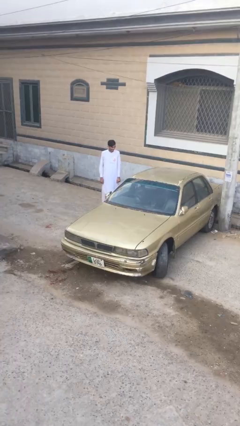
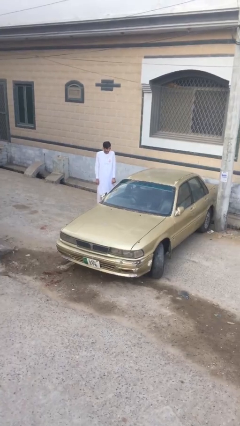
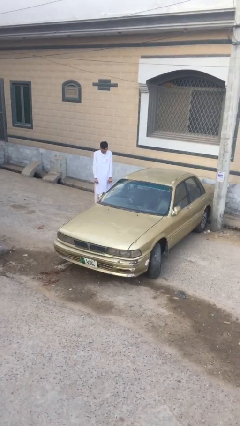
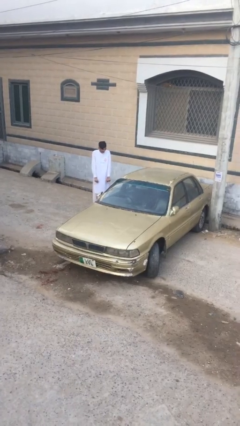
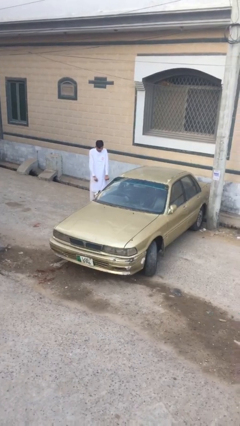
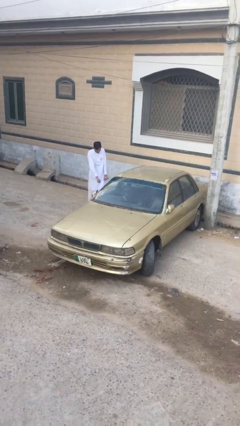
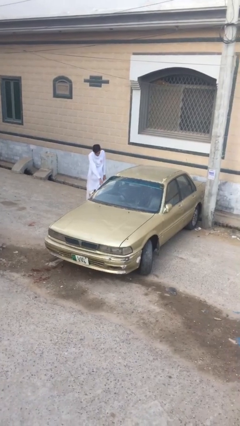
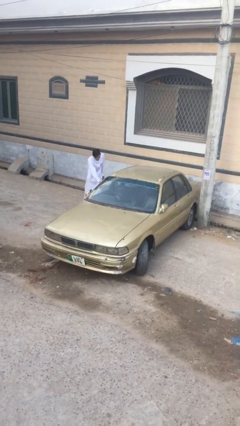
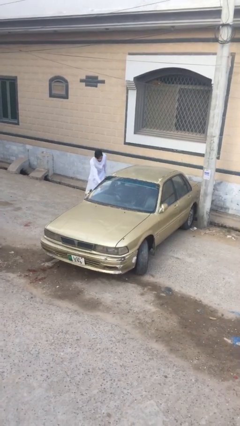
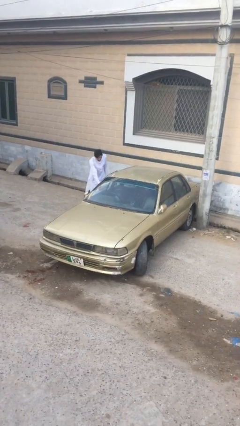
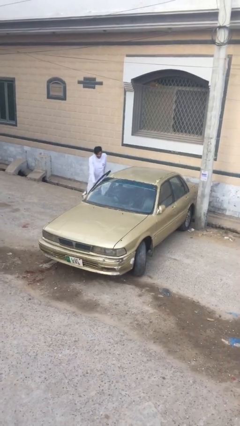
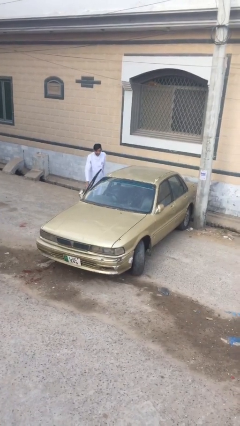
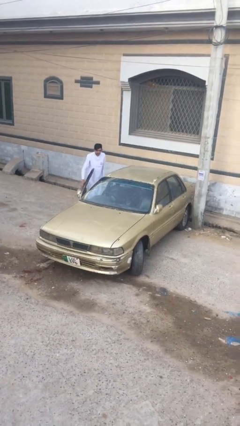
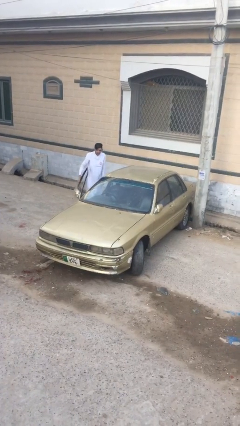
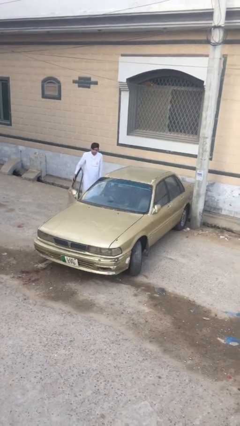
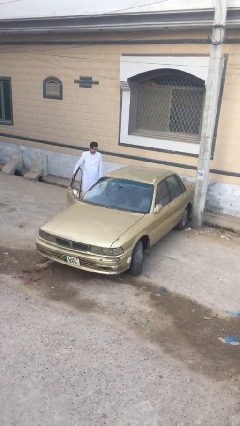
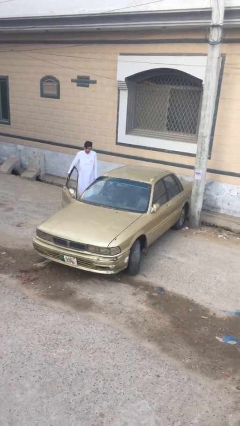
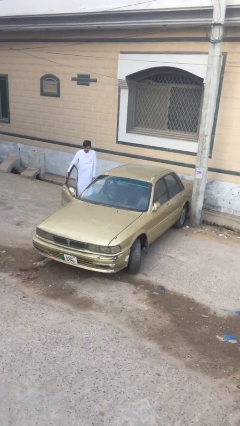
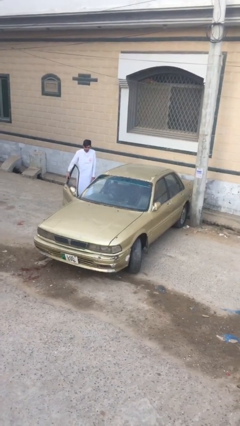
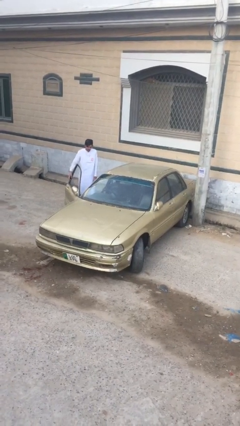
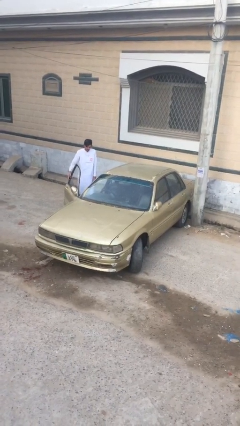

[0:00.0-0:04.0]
person opens car door

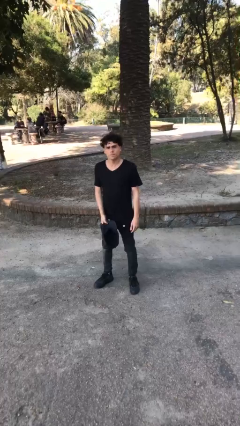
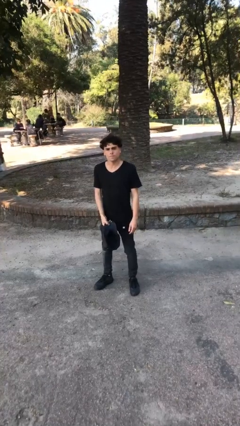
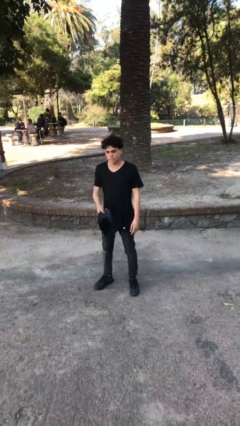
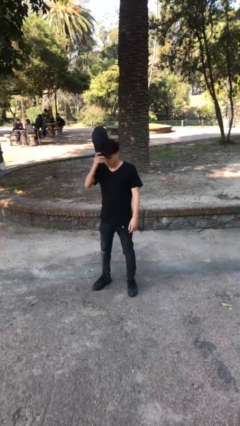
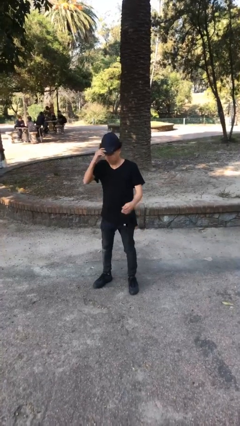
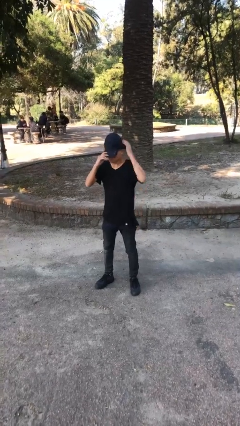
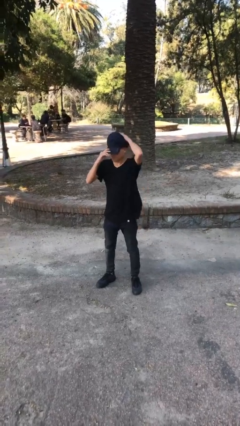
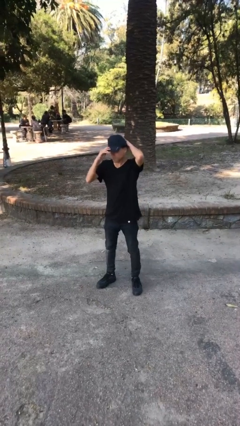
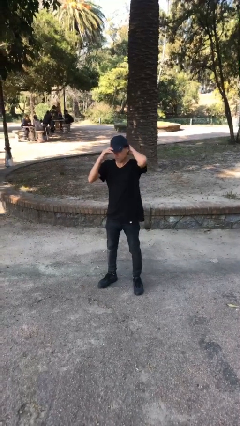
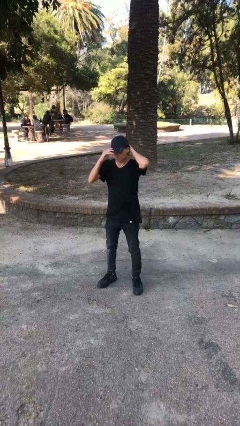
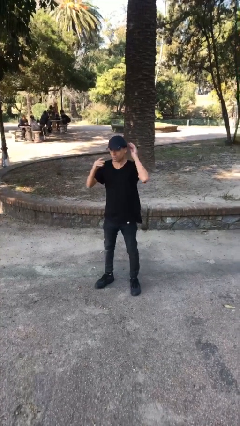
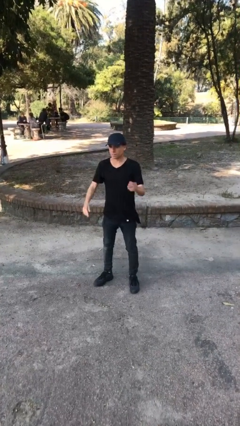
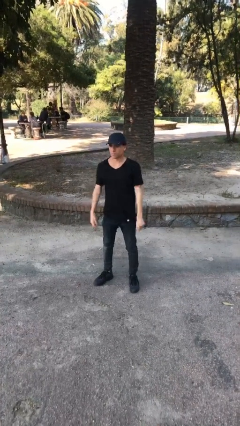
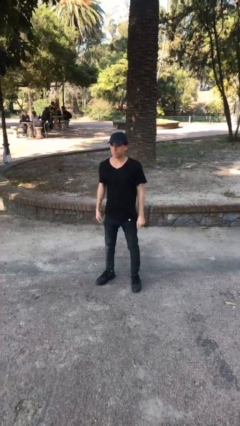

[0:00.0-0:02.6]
person puts on hat

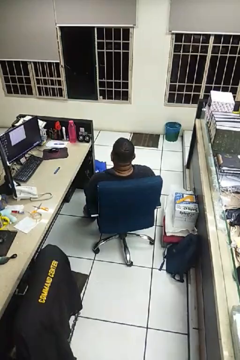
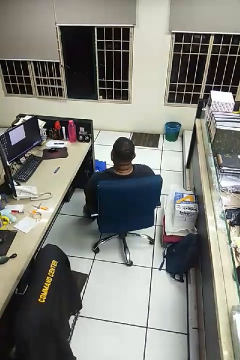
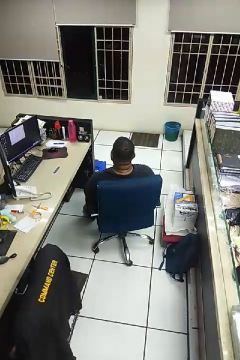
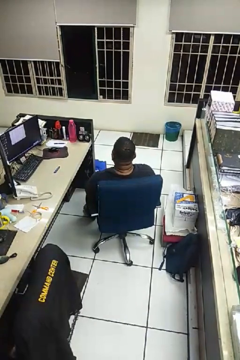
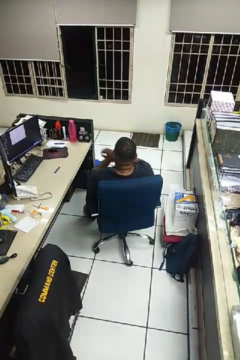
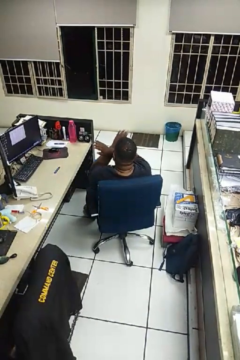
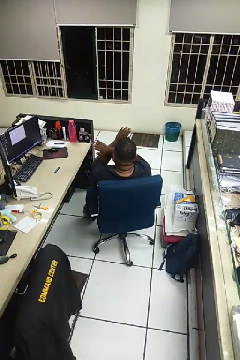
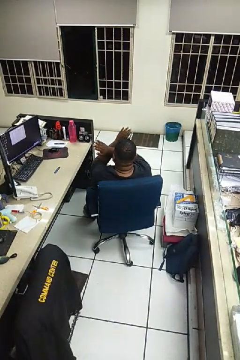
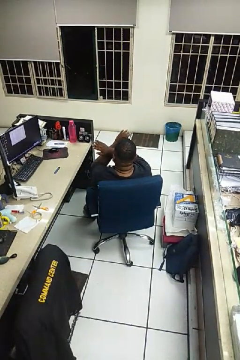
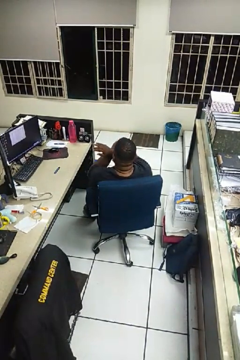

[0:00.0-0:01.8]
person gestures arms x

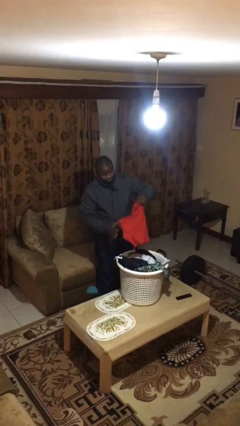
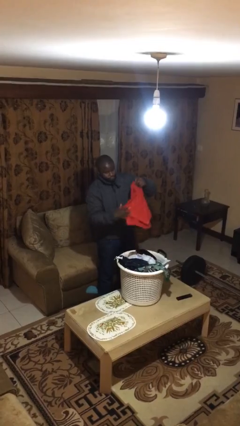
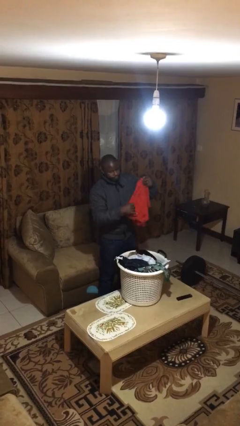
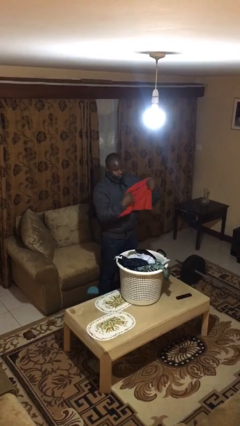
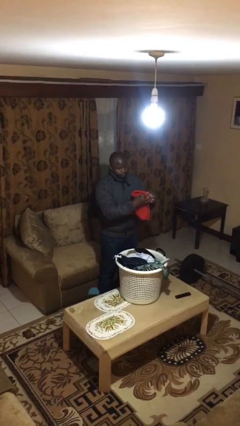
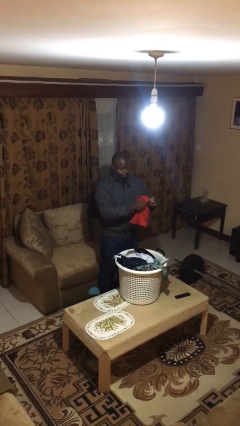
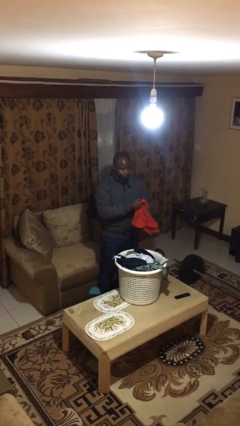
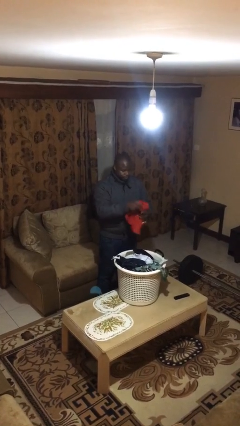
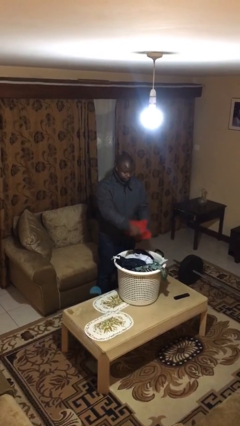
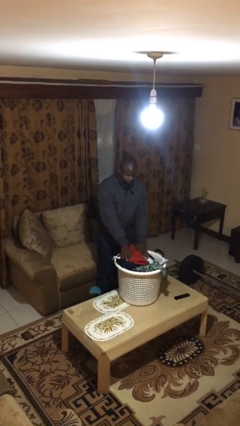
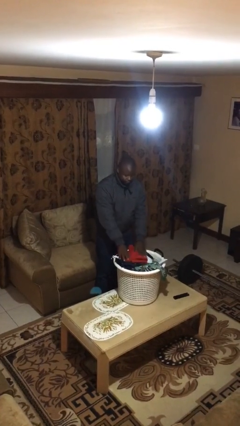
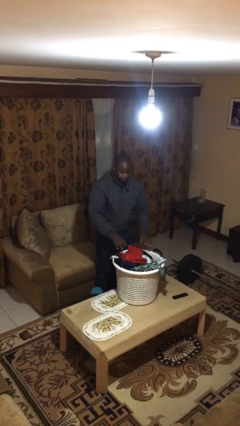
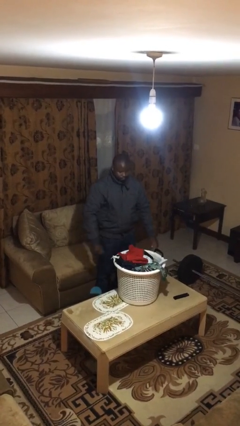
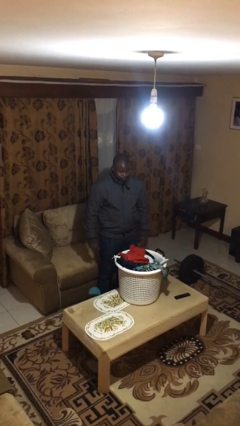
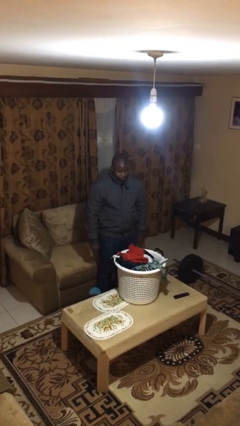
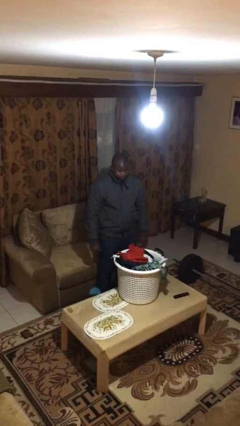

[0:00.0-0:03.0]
person folds shirt

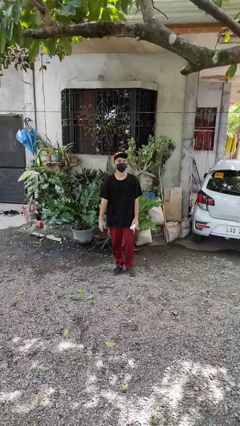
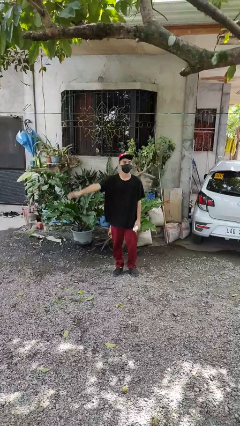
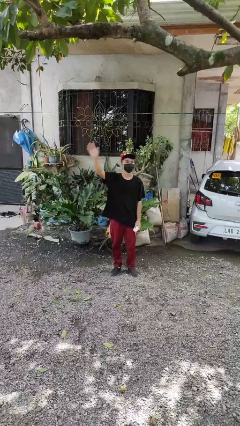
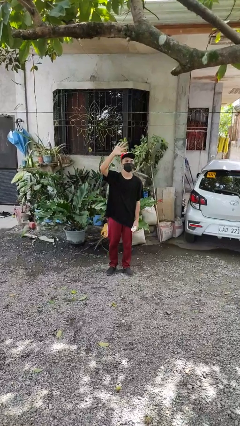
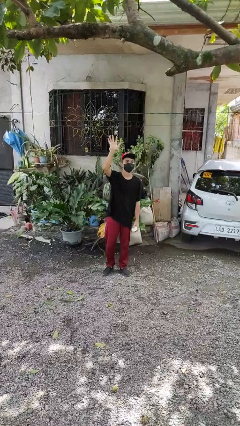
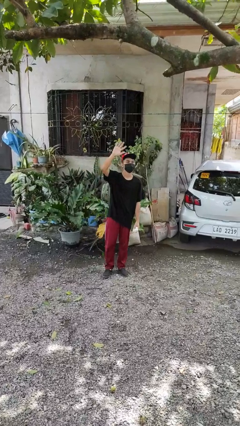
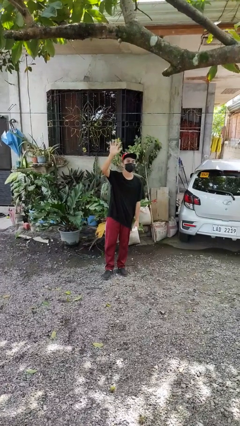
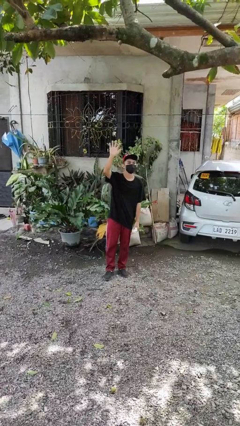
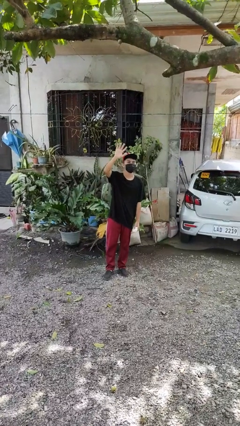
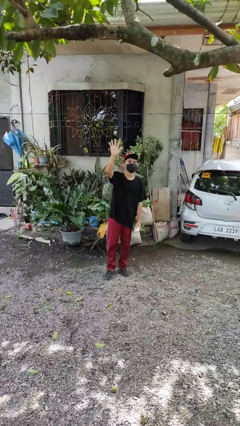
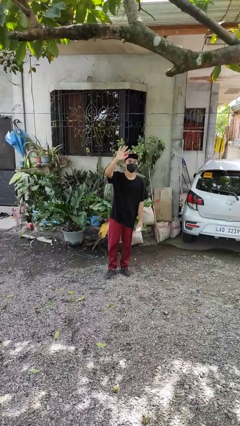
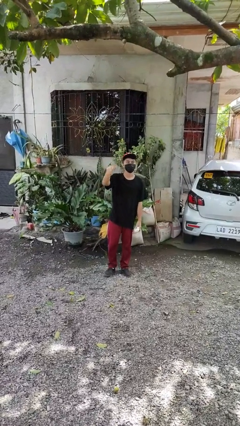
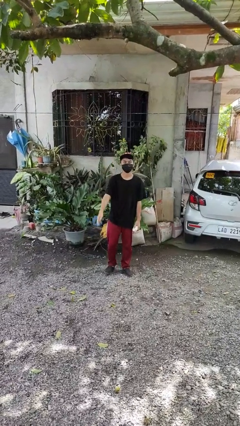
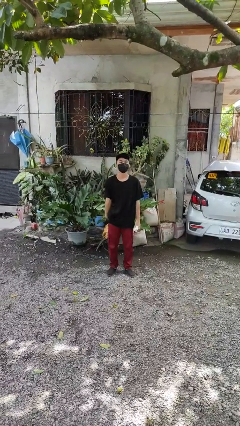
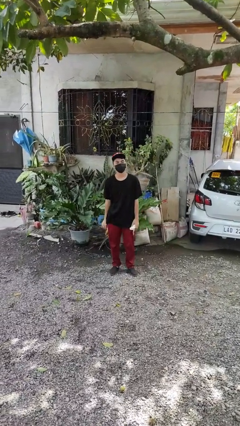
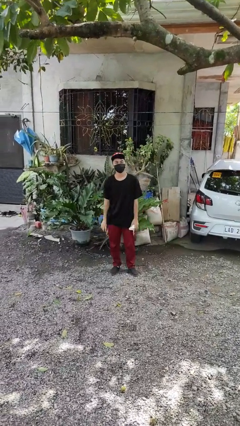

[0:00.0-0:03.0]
person waves at person

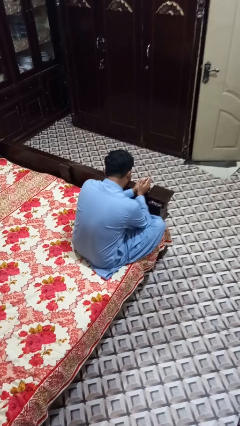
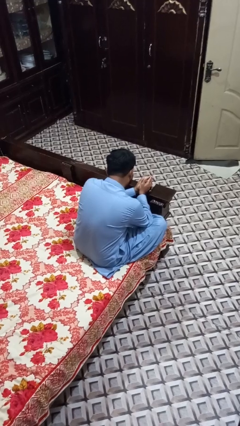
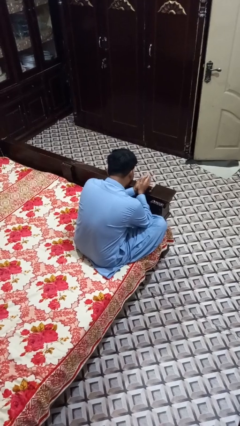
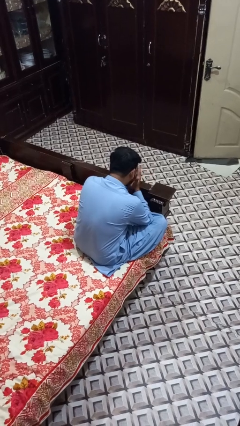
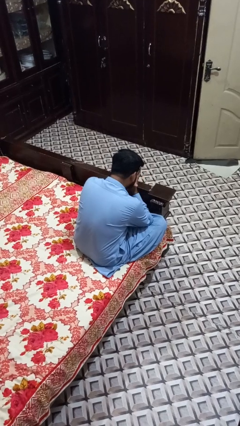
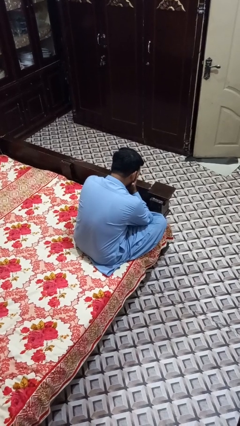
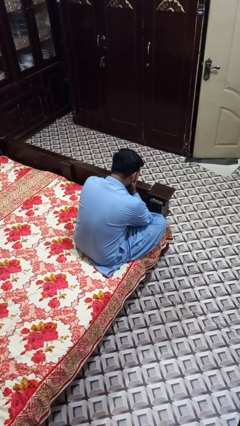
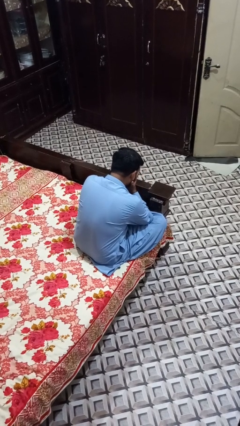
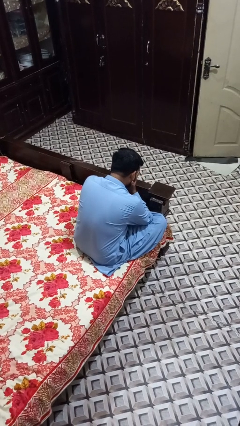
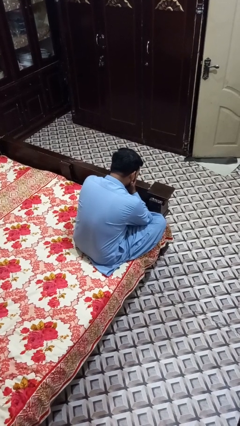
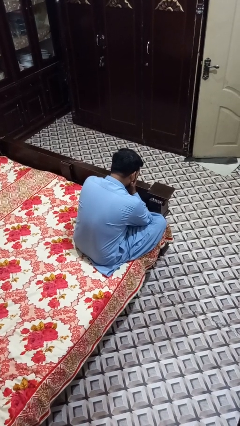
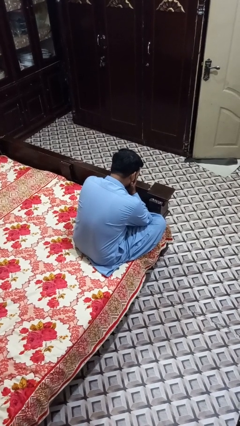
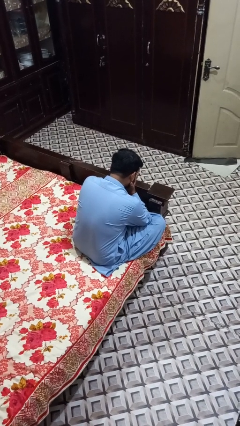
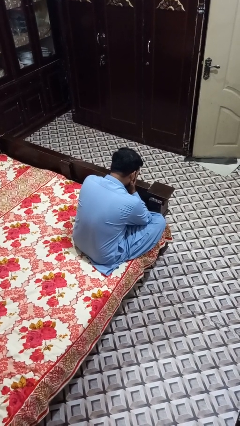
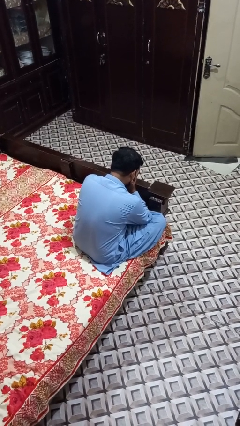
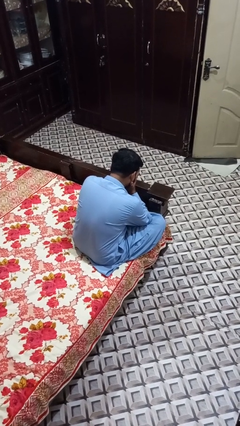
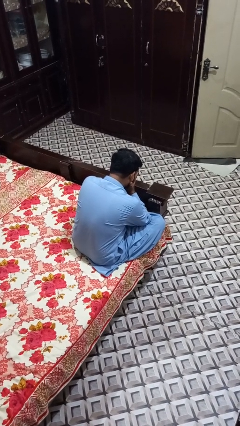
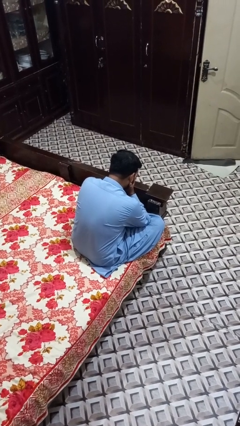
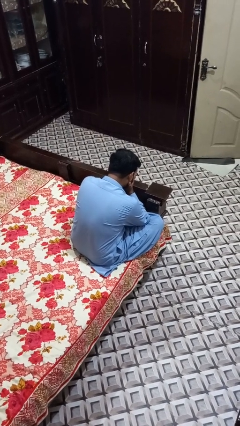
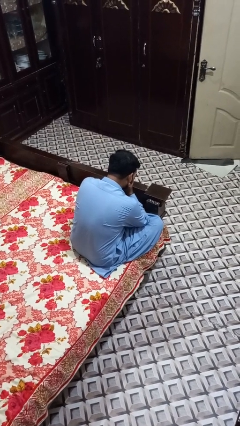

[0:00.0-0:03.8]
person covers face with hands
